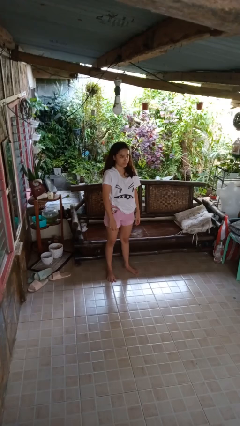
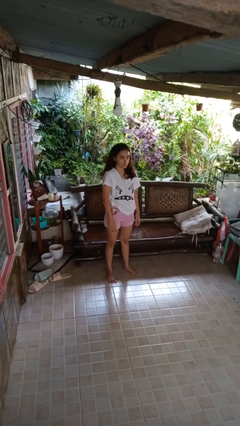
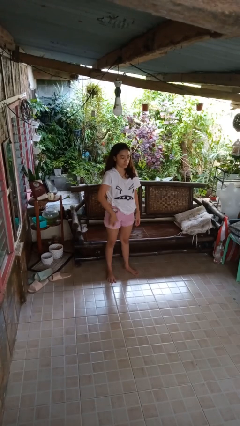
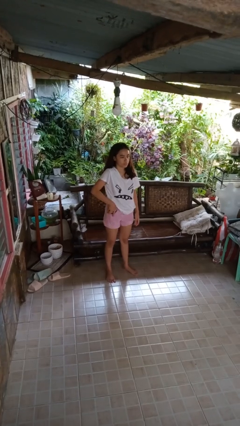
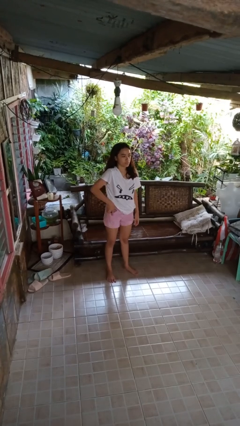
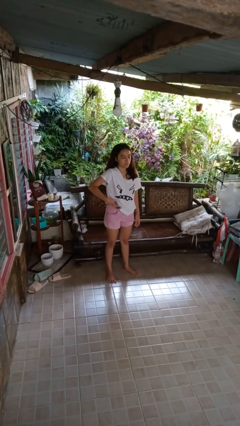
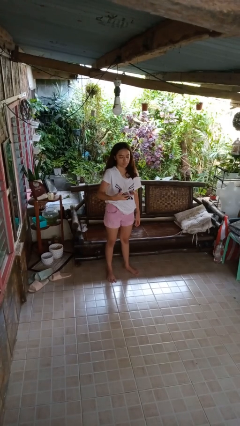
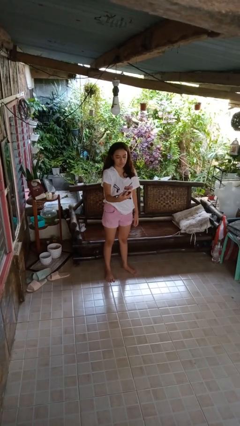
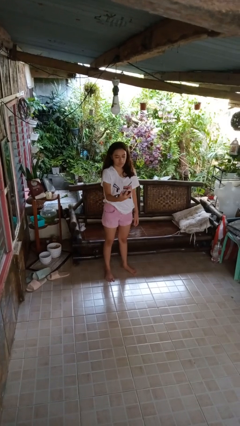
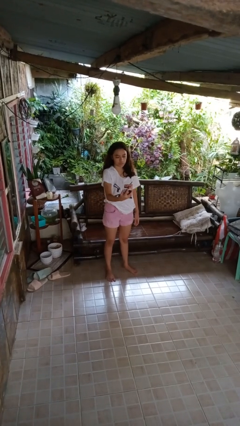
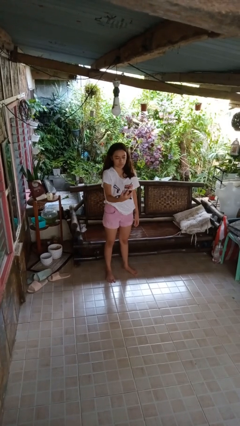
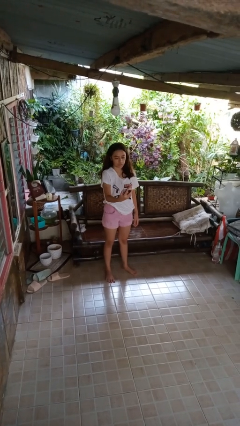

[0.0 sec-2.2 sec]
person takes phone from pocket

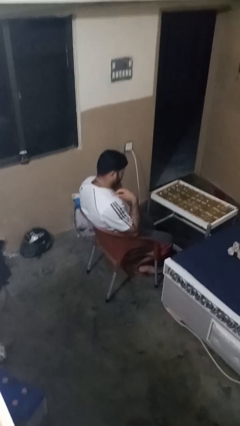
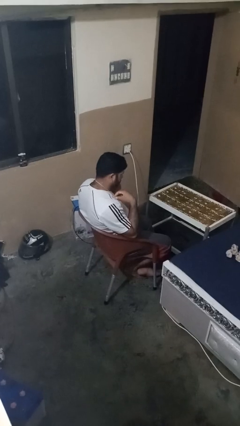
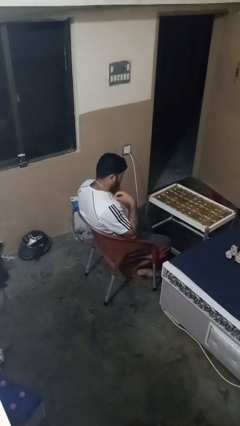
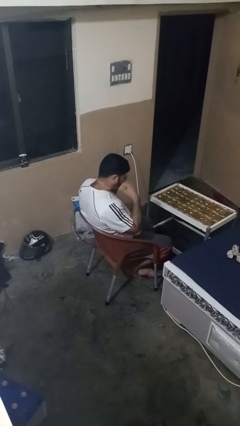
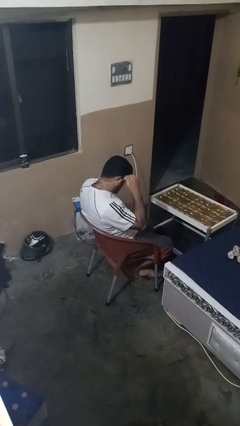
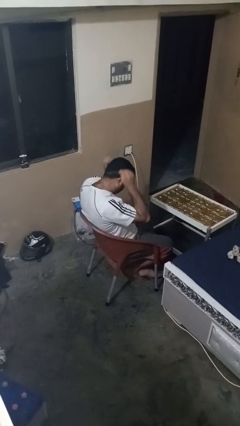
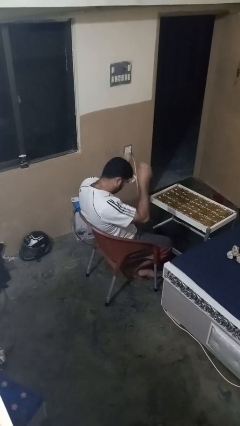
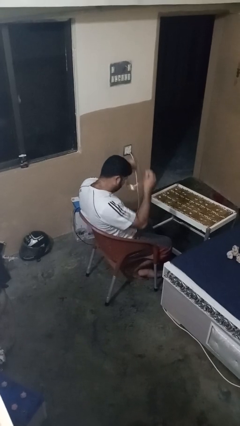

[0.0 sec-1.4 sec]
person takes off necklace

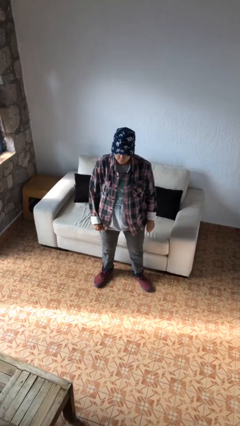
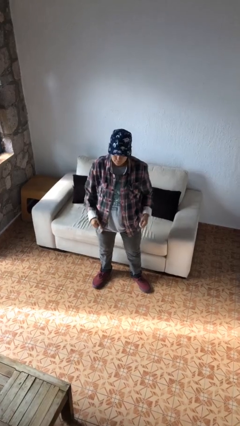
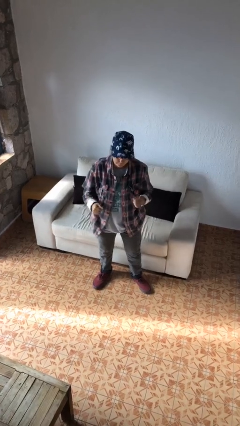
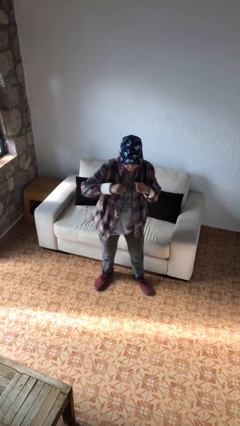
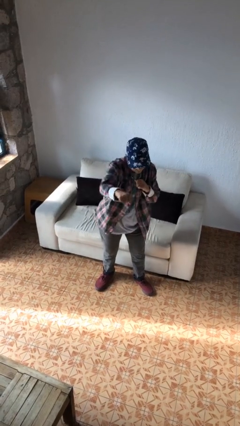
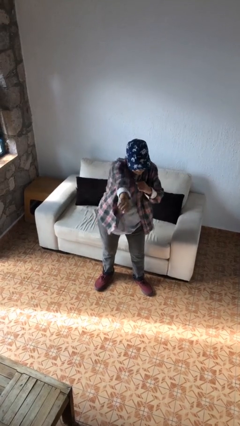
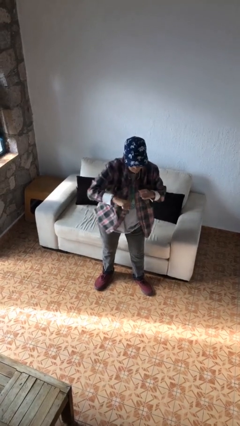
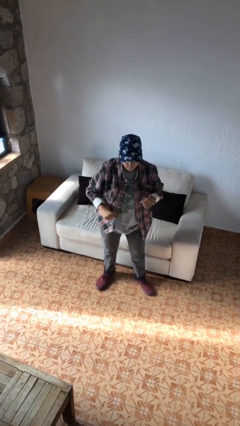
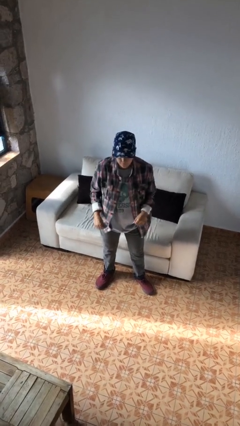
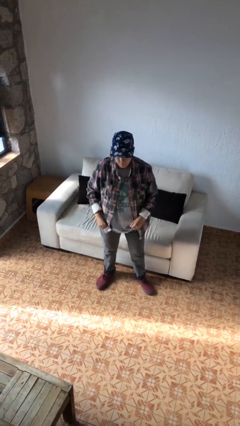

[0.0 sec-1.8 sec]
person punches

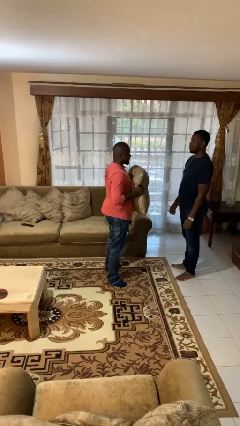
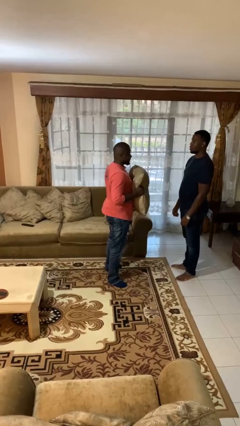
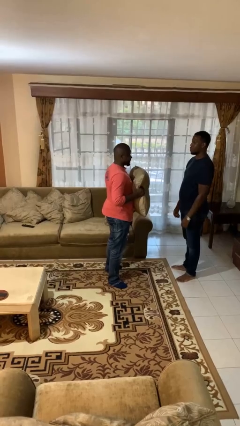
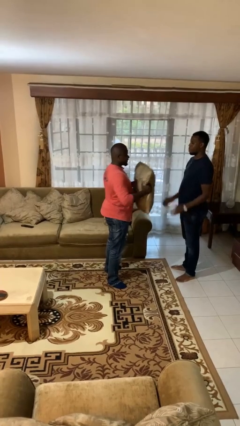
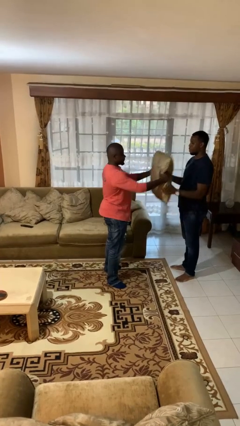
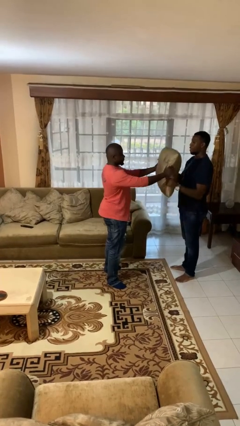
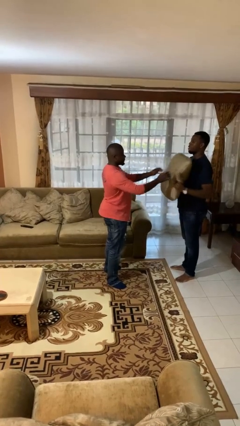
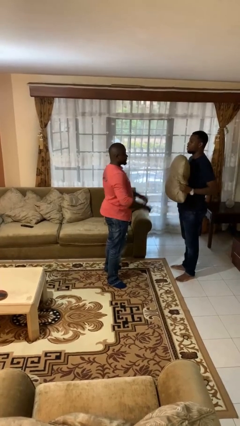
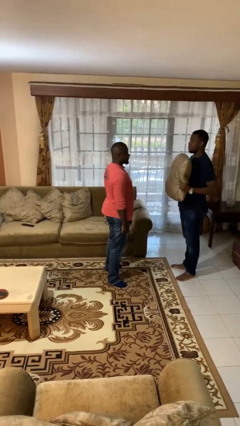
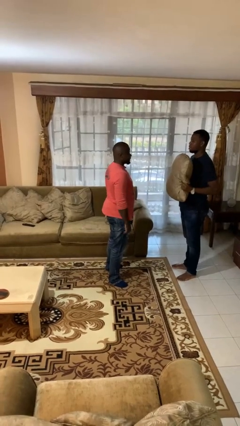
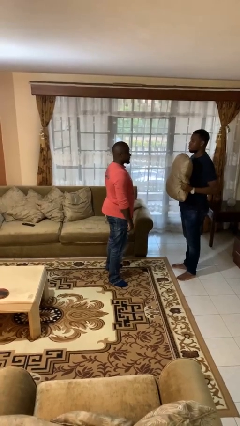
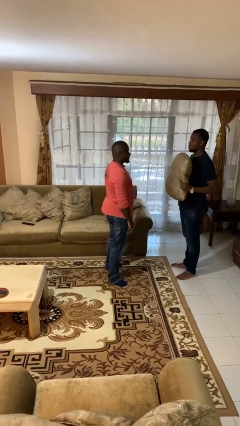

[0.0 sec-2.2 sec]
person transfers object to person

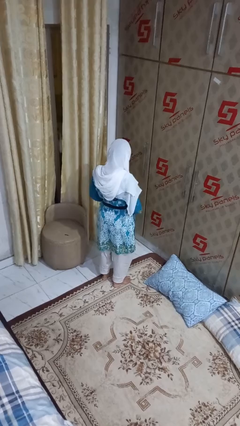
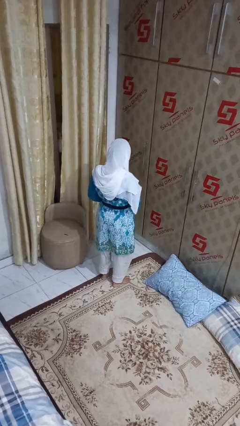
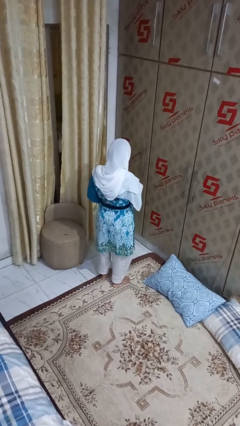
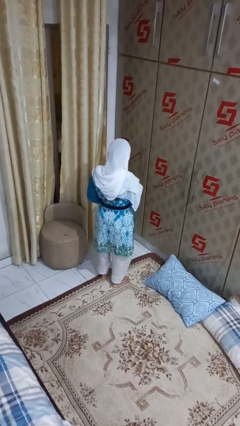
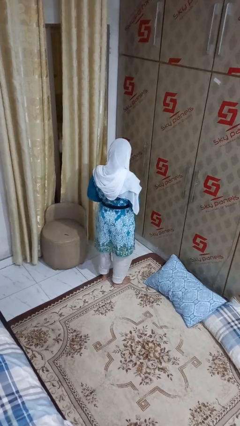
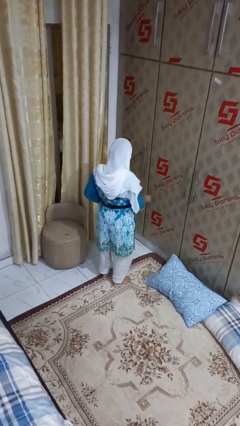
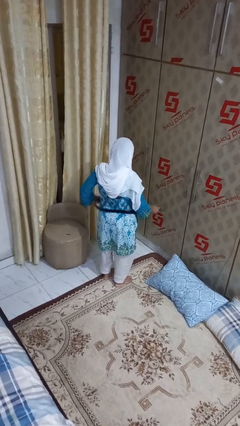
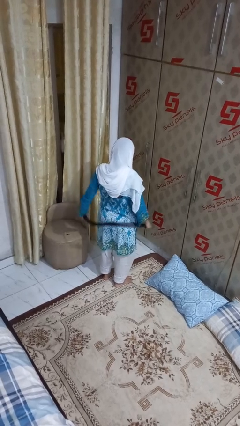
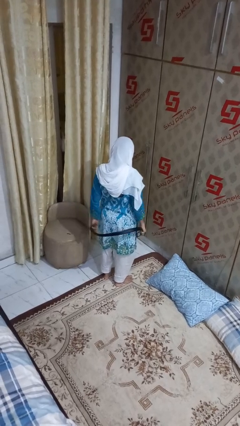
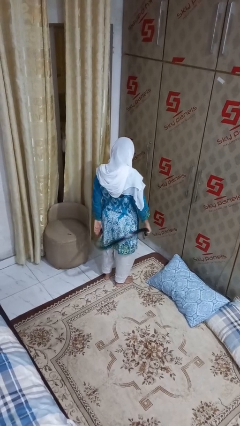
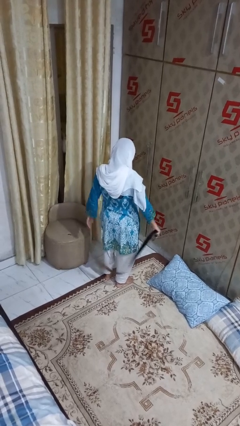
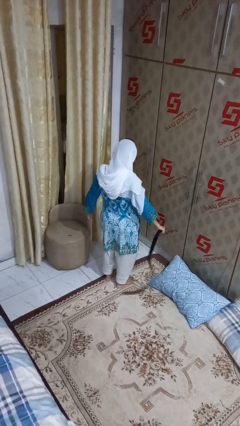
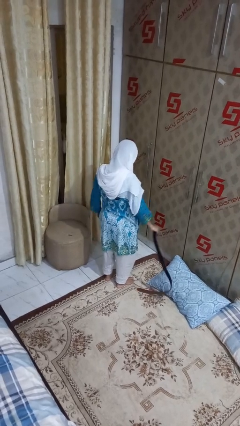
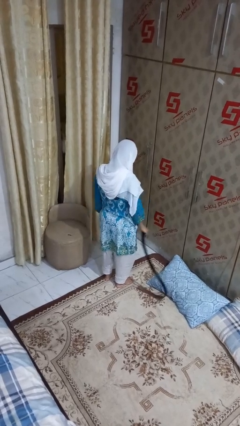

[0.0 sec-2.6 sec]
person takes off belt

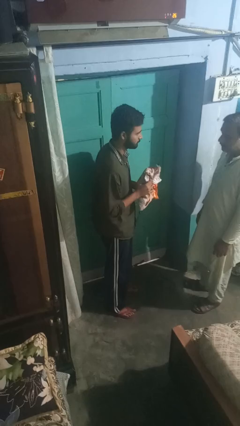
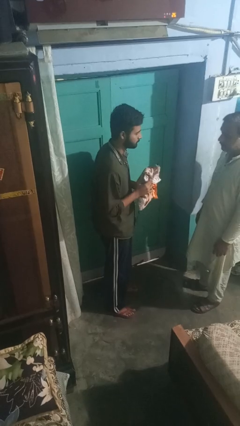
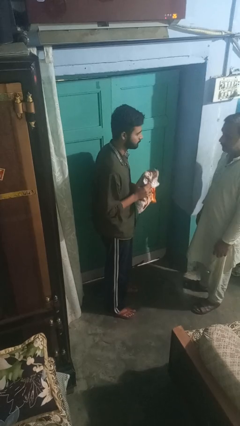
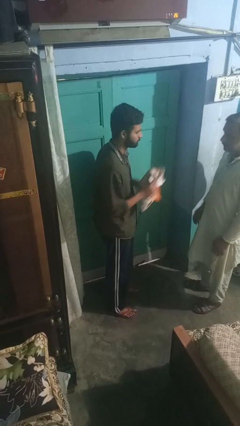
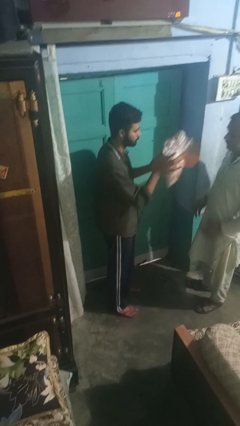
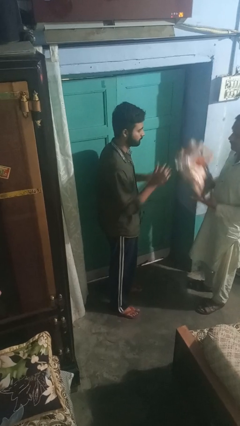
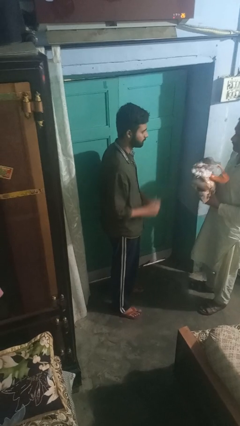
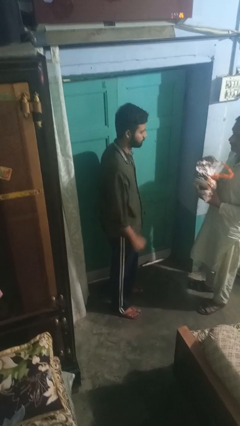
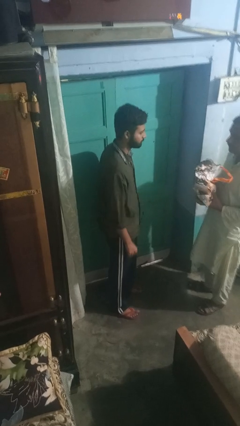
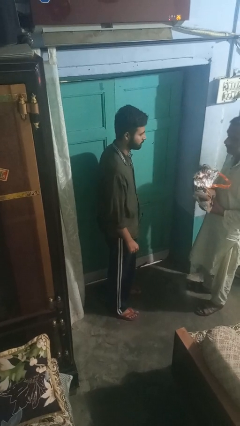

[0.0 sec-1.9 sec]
person throws object to person

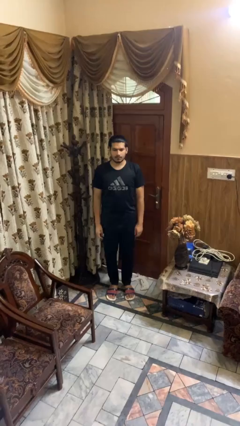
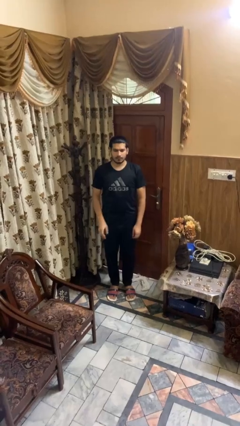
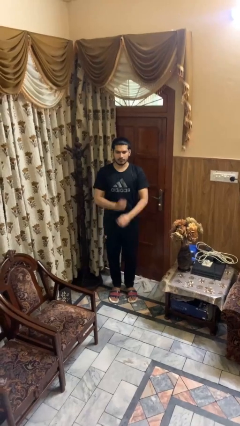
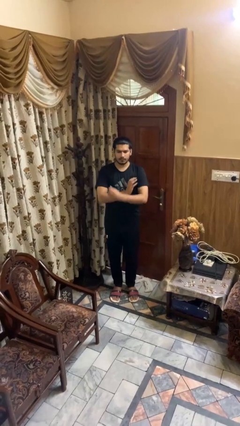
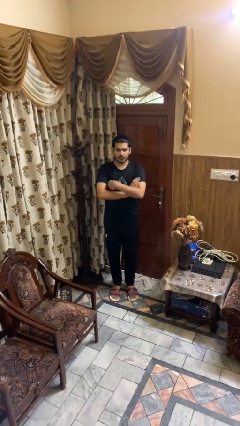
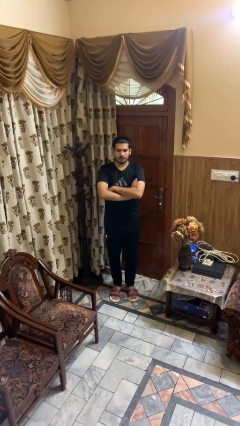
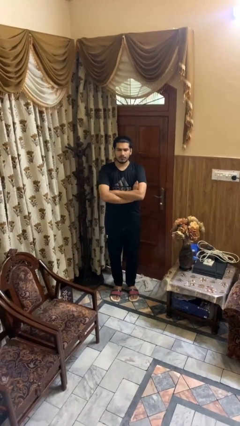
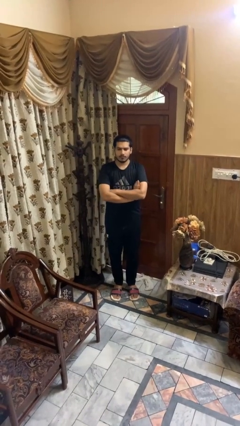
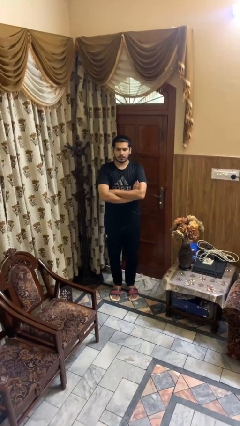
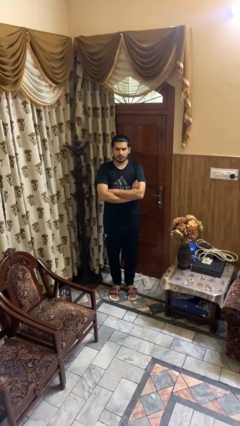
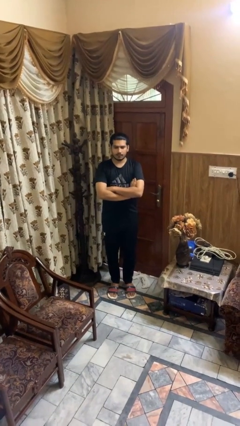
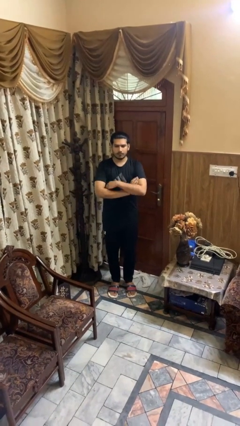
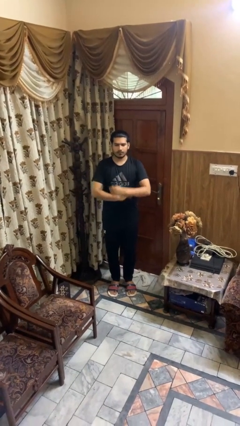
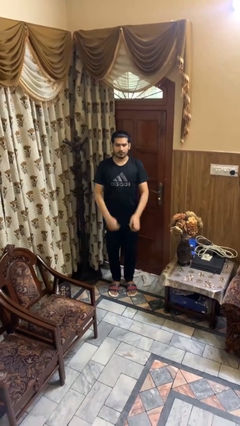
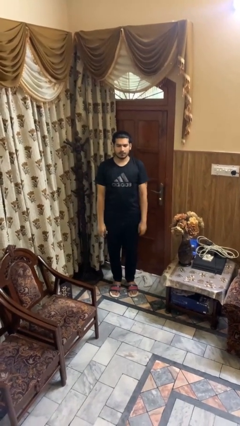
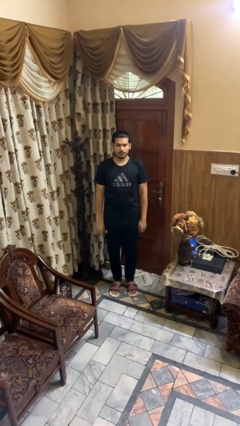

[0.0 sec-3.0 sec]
person crosses arms

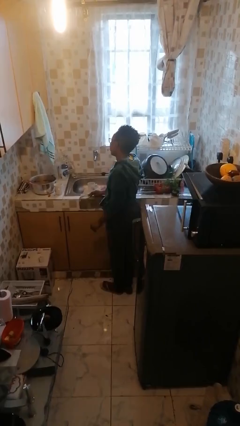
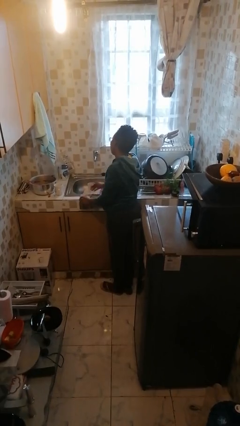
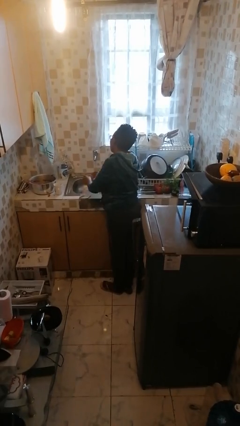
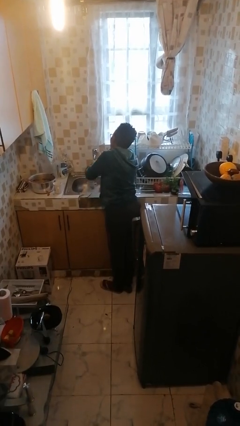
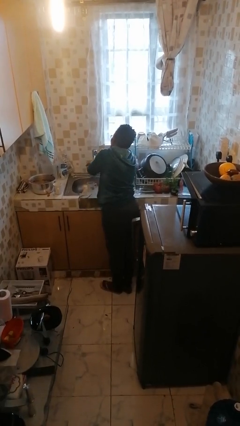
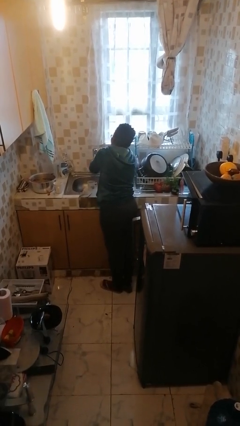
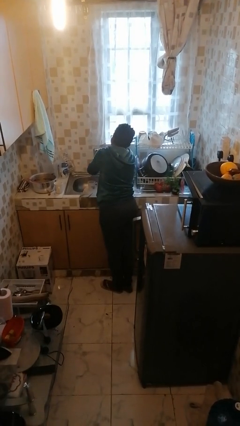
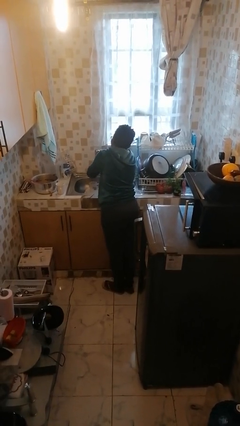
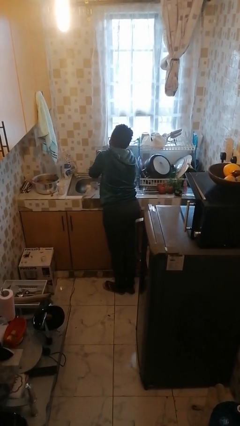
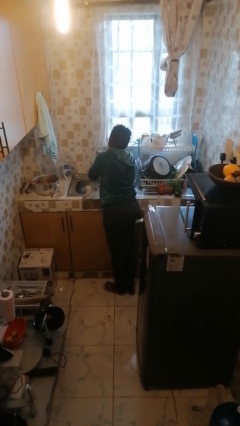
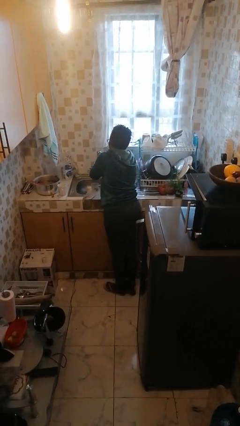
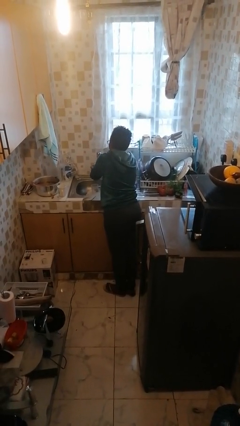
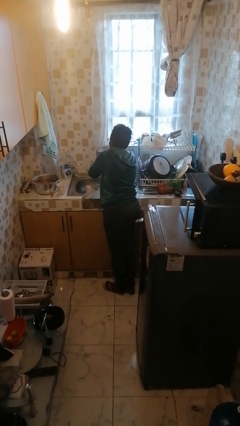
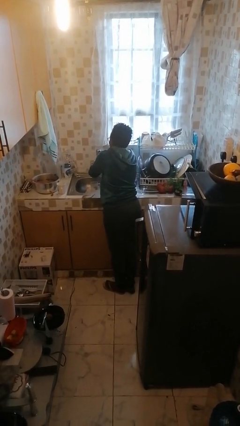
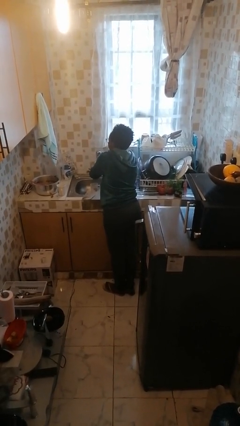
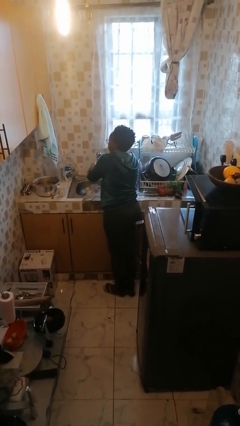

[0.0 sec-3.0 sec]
person washes hands
